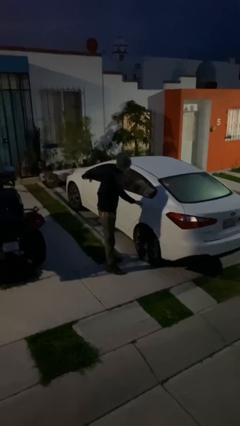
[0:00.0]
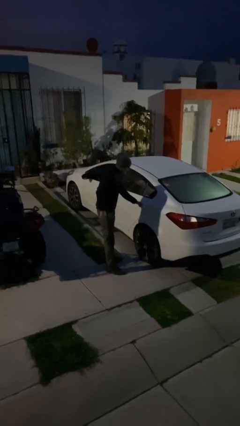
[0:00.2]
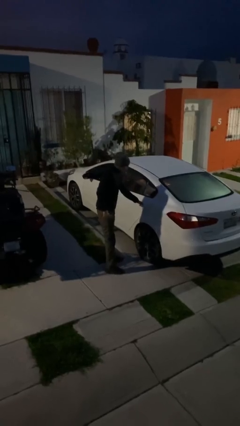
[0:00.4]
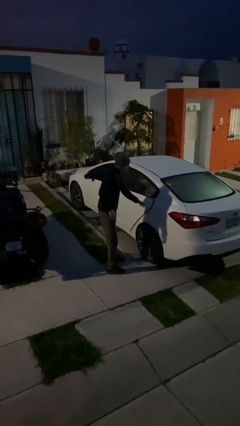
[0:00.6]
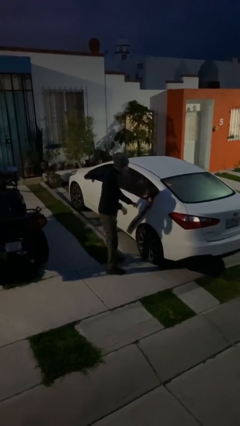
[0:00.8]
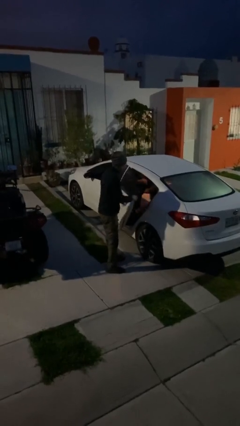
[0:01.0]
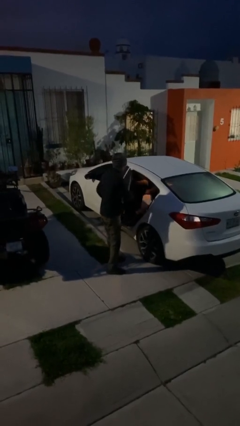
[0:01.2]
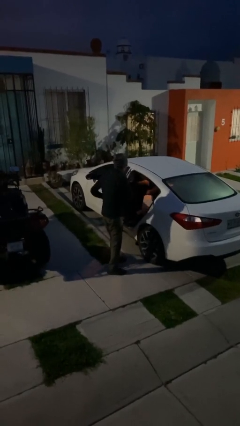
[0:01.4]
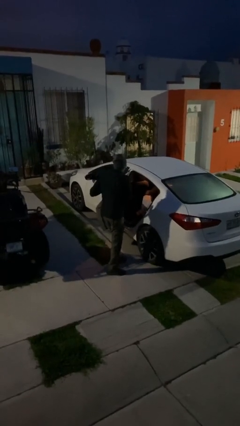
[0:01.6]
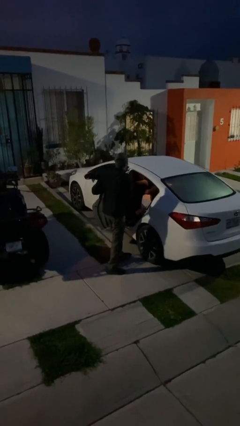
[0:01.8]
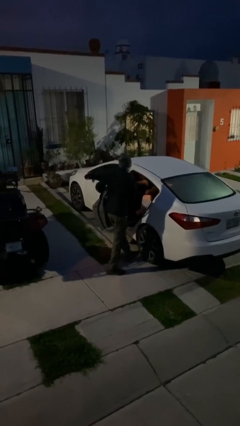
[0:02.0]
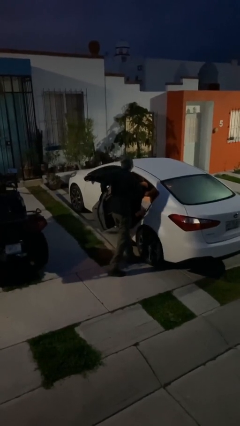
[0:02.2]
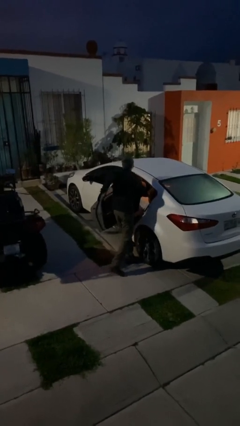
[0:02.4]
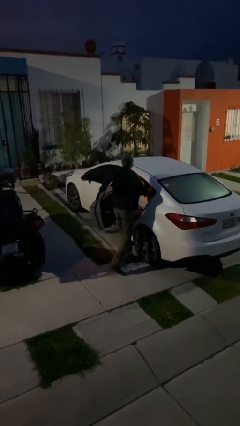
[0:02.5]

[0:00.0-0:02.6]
person opens car door

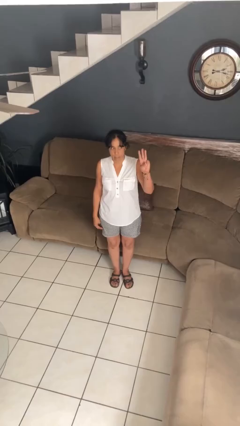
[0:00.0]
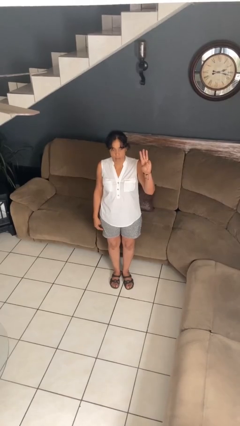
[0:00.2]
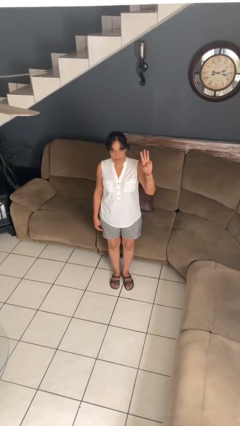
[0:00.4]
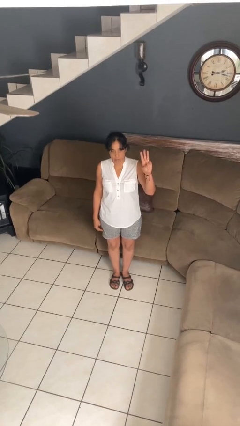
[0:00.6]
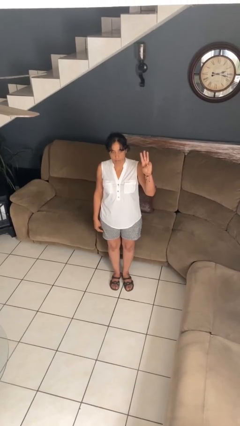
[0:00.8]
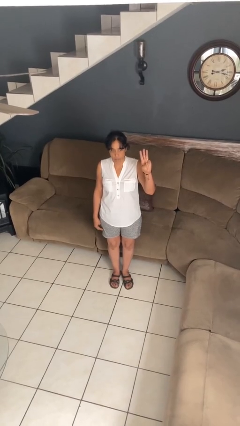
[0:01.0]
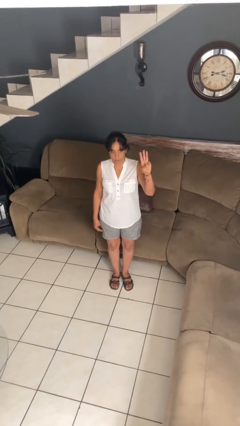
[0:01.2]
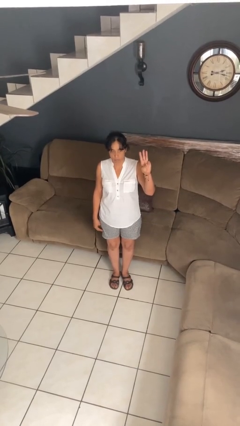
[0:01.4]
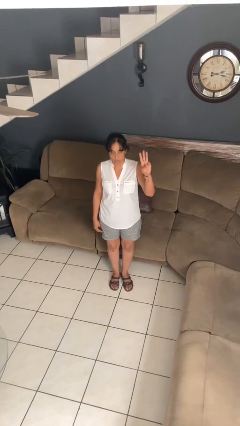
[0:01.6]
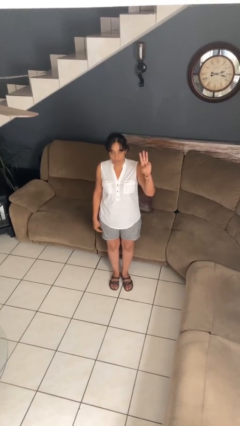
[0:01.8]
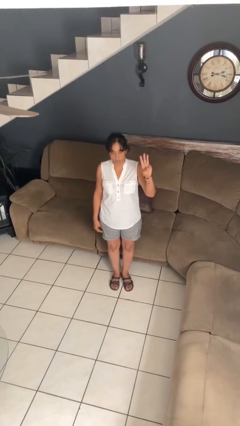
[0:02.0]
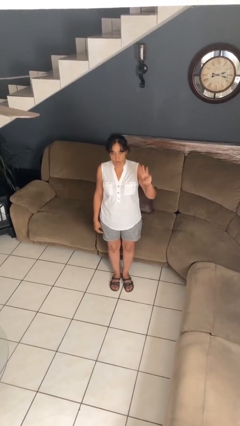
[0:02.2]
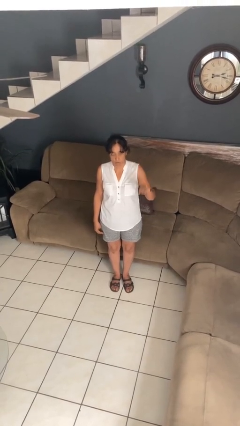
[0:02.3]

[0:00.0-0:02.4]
person gestures number three

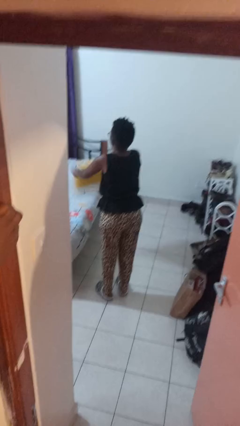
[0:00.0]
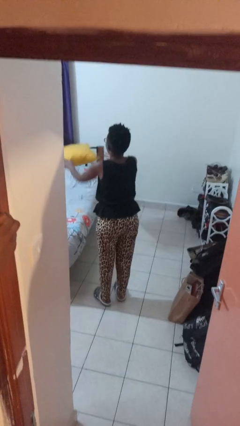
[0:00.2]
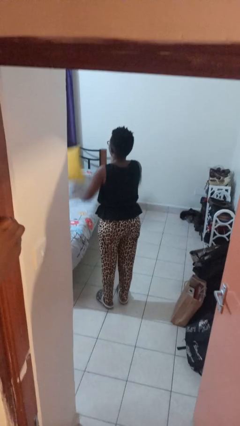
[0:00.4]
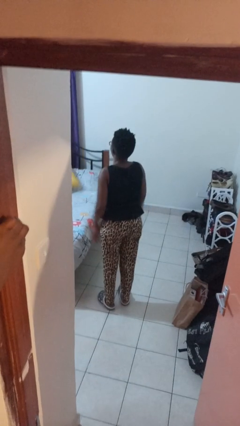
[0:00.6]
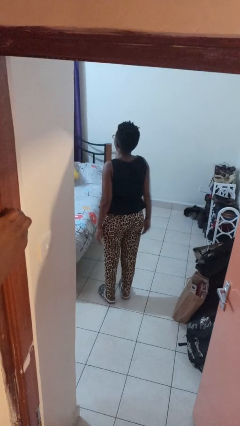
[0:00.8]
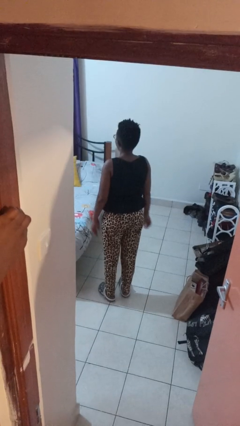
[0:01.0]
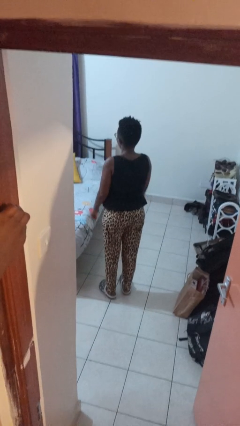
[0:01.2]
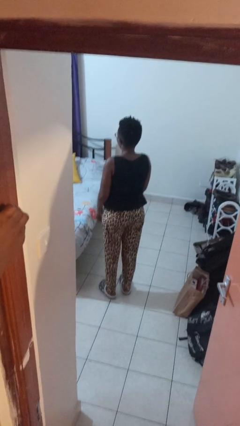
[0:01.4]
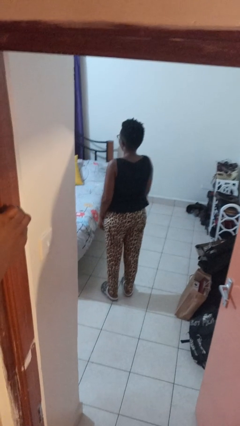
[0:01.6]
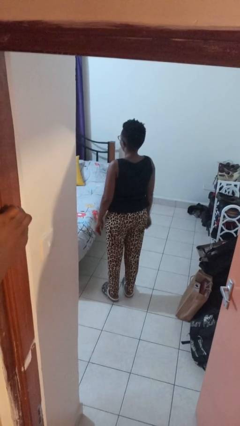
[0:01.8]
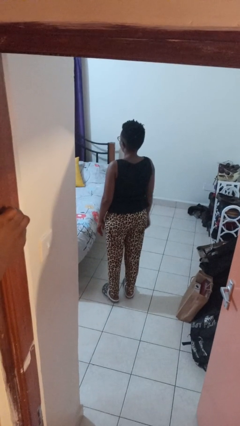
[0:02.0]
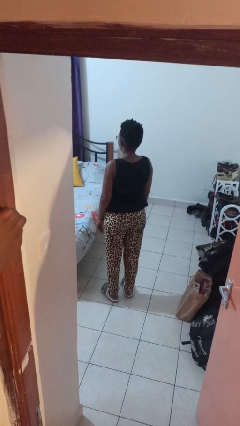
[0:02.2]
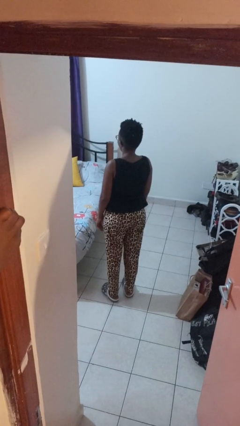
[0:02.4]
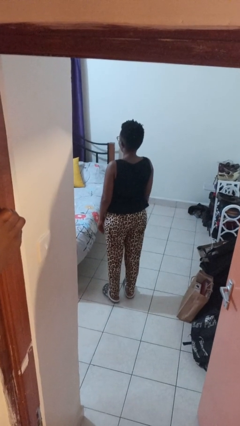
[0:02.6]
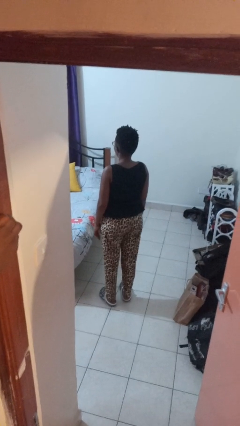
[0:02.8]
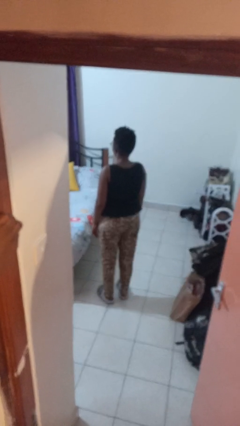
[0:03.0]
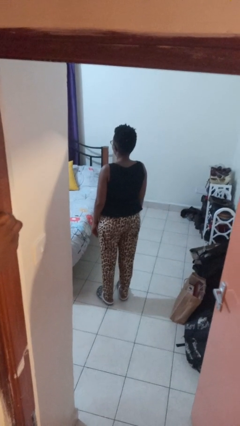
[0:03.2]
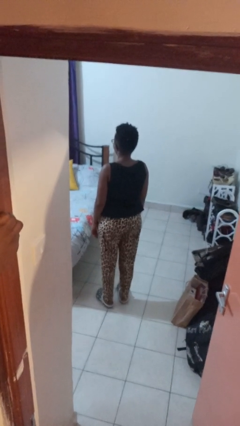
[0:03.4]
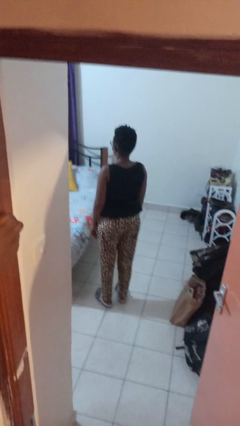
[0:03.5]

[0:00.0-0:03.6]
person throws object on bed

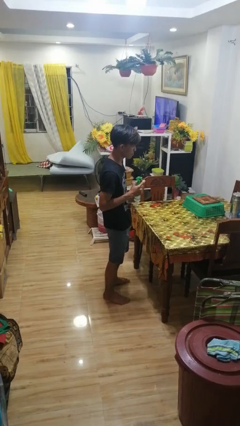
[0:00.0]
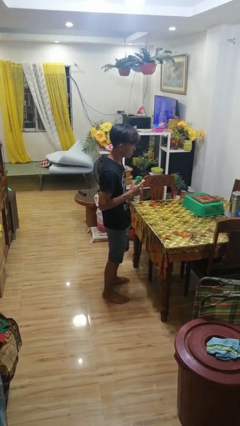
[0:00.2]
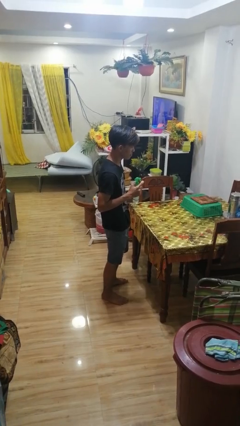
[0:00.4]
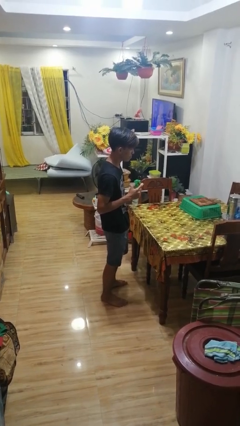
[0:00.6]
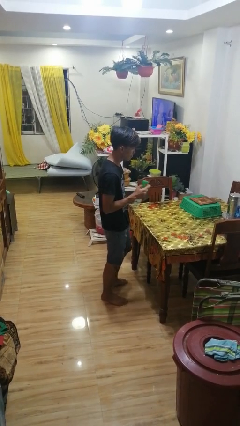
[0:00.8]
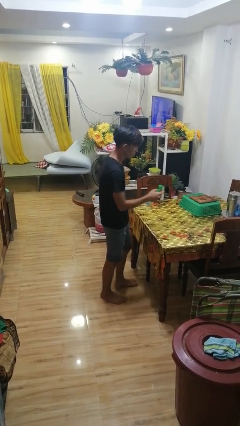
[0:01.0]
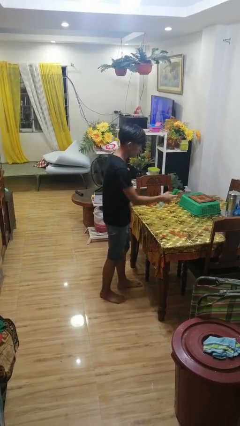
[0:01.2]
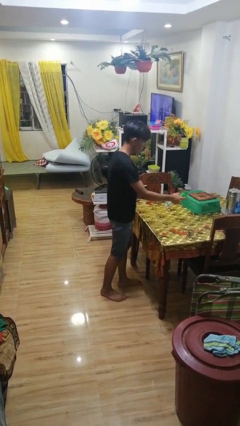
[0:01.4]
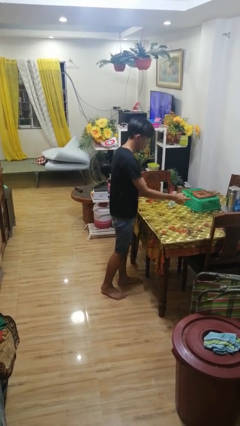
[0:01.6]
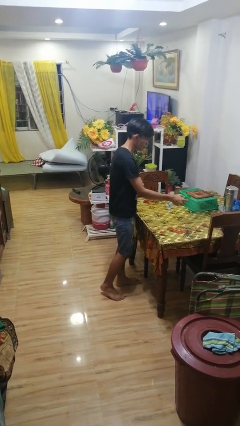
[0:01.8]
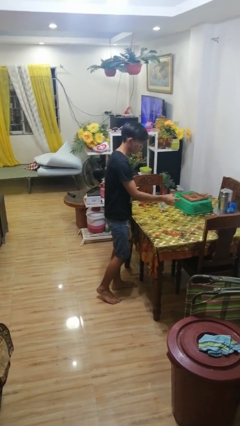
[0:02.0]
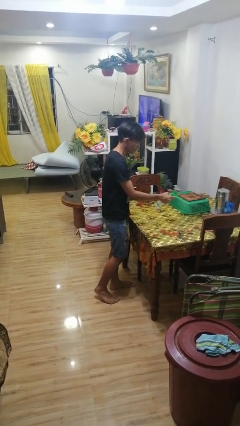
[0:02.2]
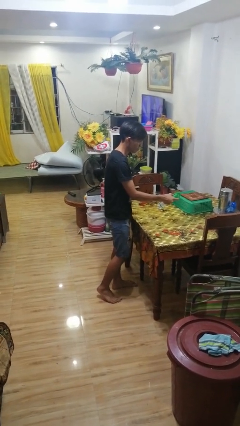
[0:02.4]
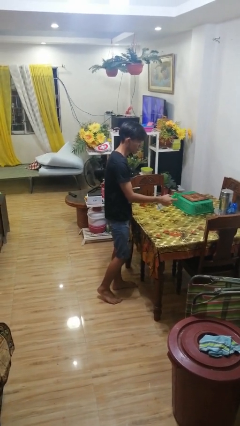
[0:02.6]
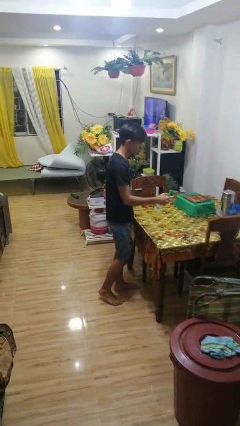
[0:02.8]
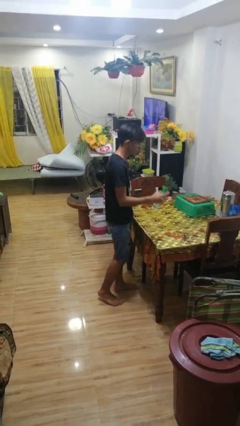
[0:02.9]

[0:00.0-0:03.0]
person sprays from bottle

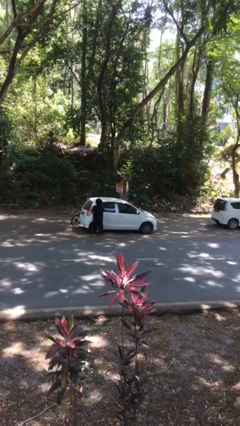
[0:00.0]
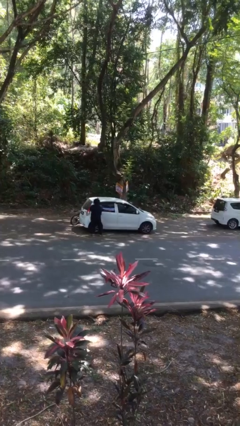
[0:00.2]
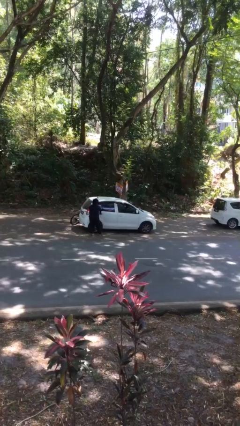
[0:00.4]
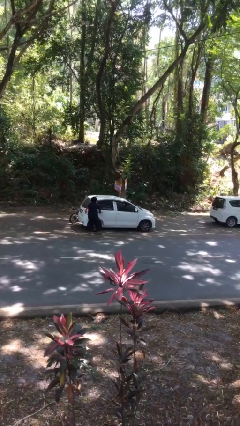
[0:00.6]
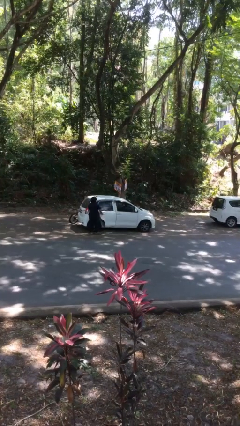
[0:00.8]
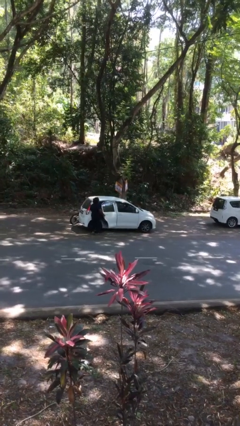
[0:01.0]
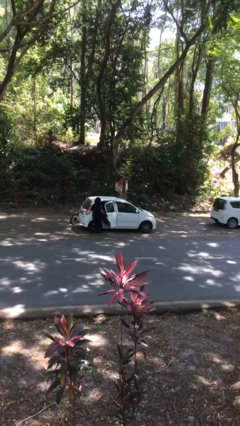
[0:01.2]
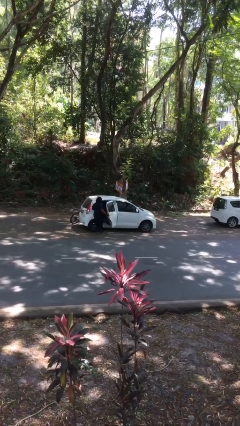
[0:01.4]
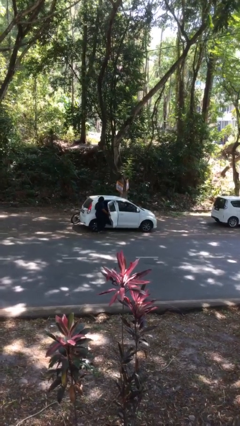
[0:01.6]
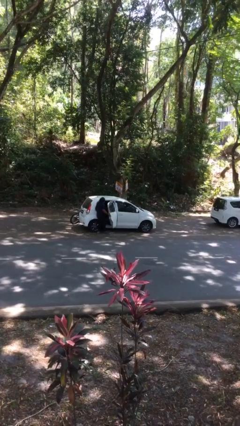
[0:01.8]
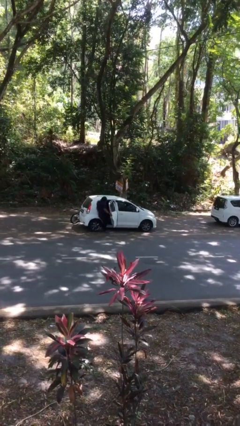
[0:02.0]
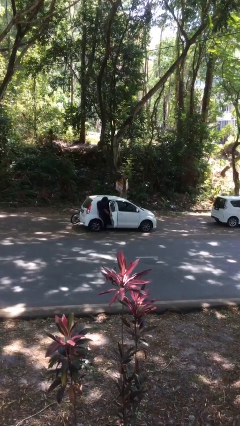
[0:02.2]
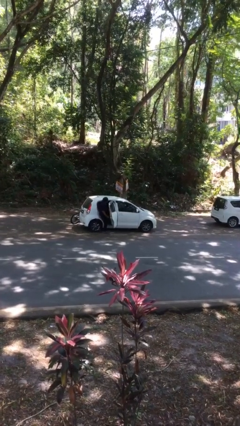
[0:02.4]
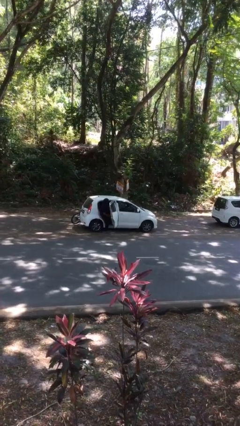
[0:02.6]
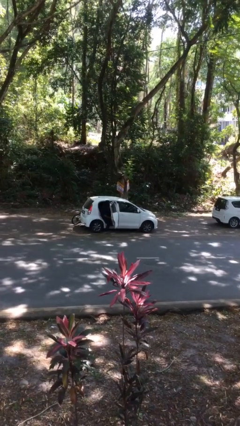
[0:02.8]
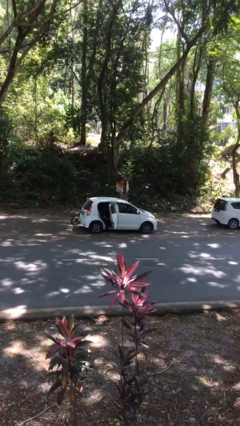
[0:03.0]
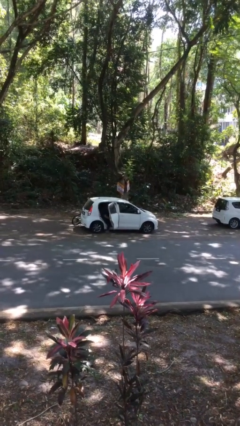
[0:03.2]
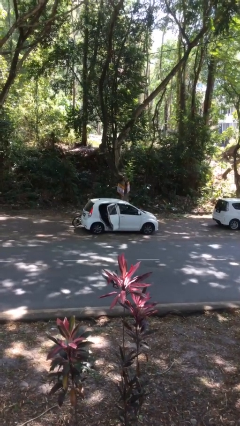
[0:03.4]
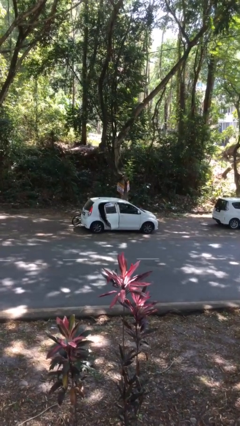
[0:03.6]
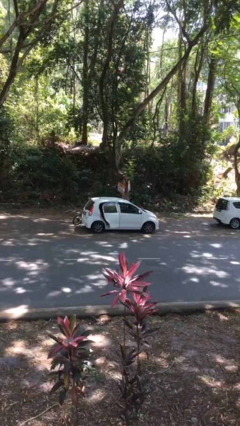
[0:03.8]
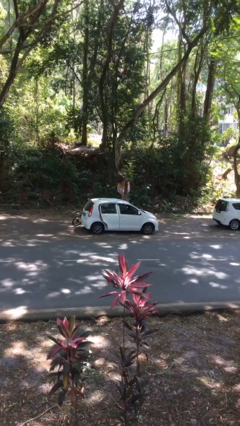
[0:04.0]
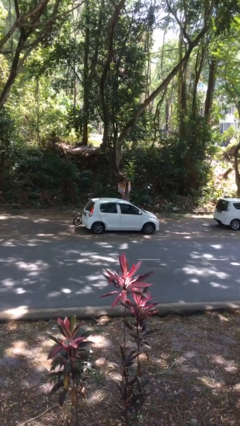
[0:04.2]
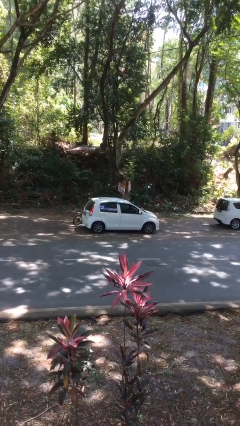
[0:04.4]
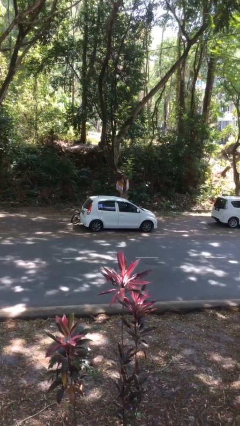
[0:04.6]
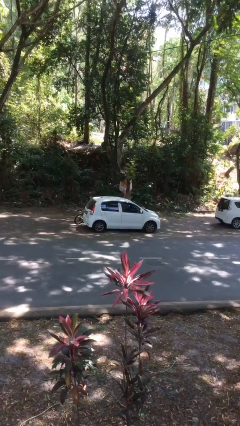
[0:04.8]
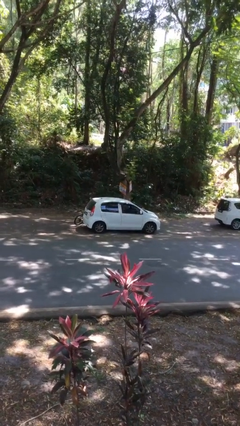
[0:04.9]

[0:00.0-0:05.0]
car picks up person

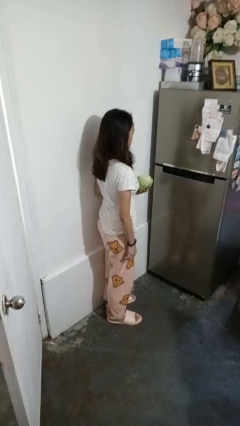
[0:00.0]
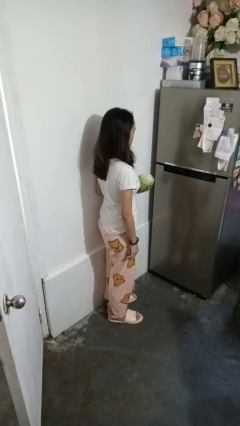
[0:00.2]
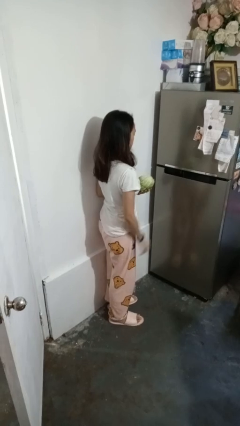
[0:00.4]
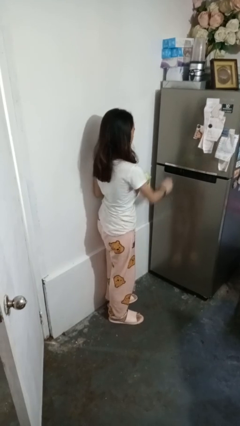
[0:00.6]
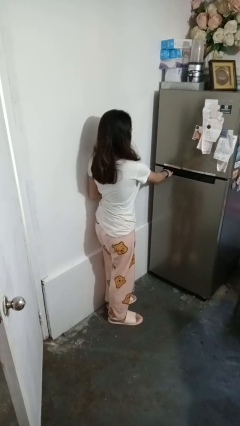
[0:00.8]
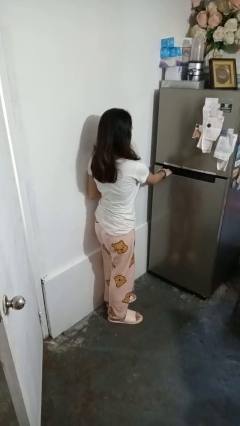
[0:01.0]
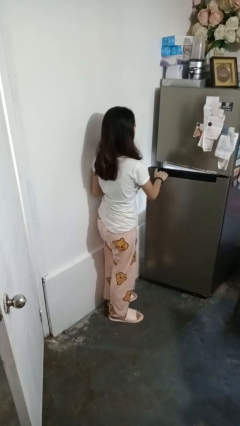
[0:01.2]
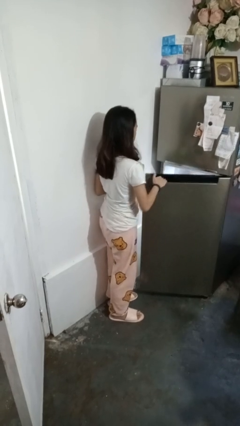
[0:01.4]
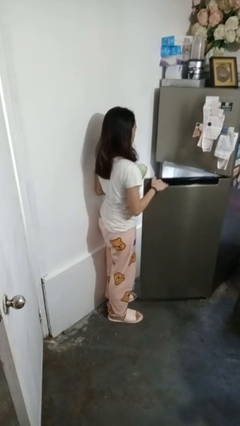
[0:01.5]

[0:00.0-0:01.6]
person opens refrigerator
